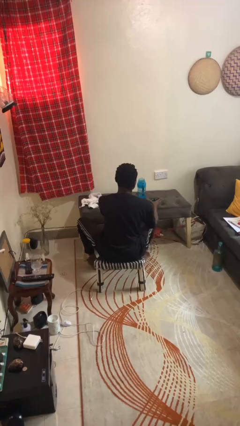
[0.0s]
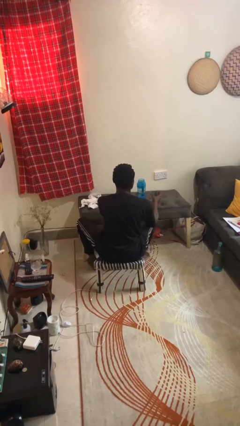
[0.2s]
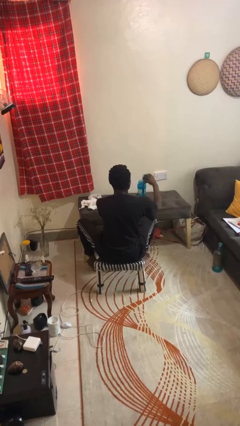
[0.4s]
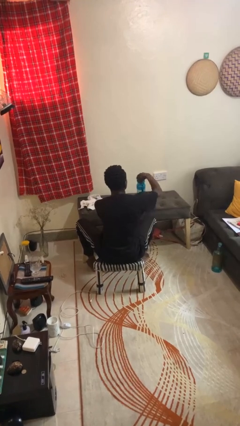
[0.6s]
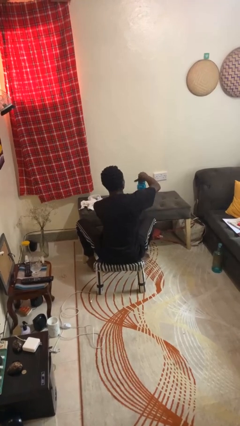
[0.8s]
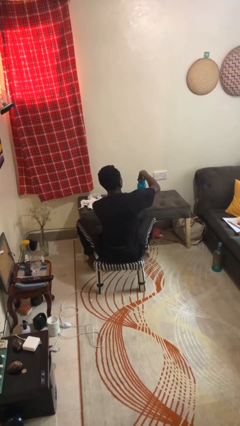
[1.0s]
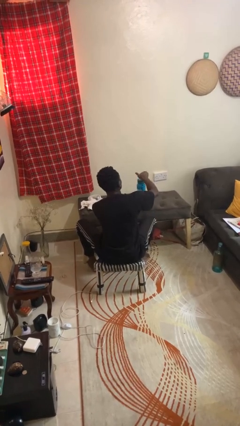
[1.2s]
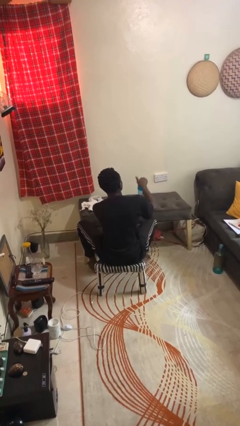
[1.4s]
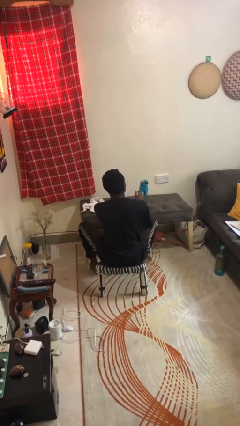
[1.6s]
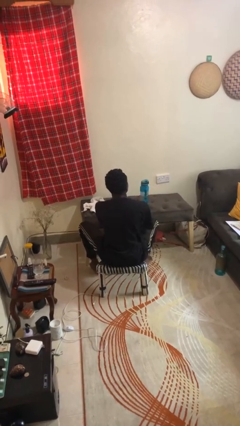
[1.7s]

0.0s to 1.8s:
person closes jar

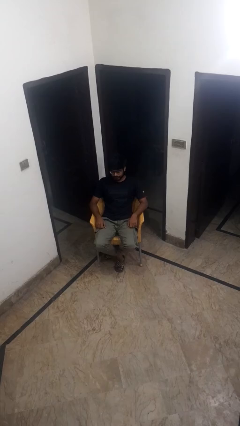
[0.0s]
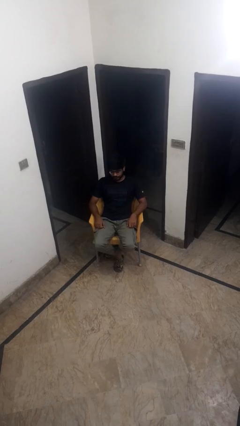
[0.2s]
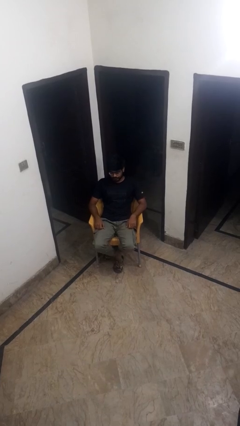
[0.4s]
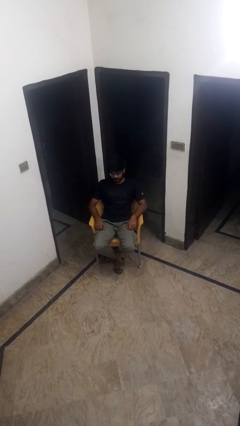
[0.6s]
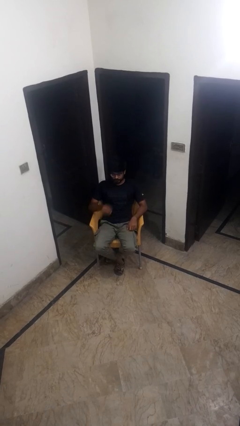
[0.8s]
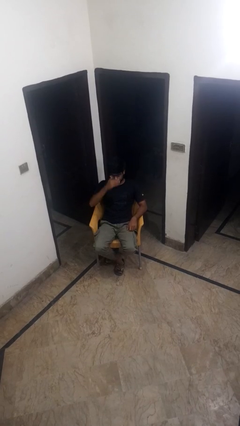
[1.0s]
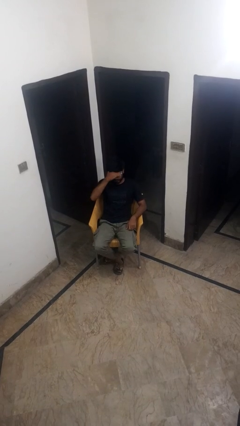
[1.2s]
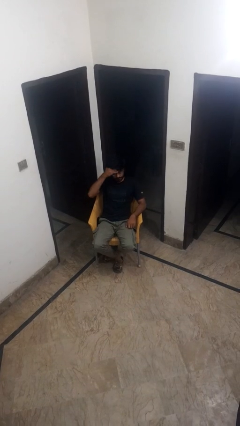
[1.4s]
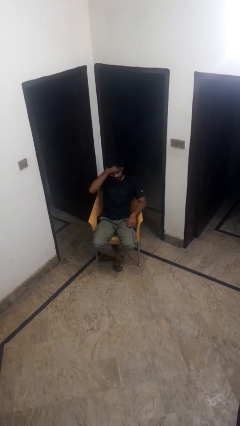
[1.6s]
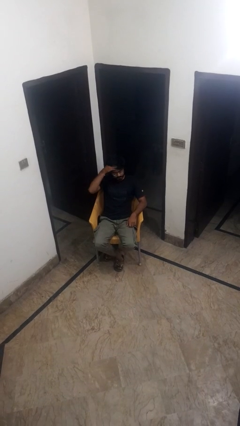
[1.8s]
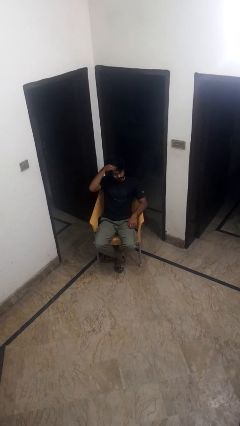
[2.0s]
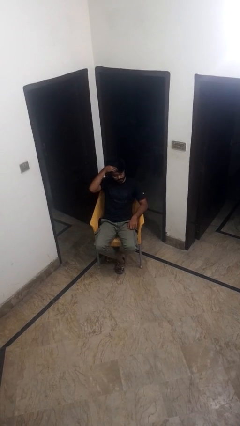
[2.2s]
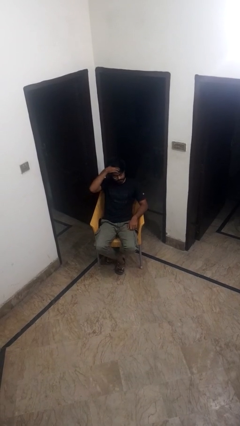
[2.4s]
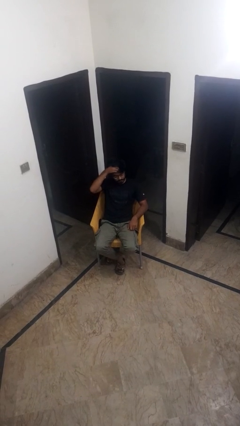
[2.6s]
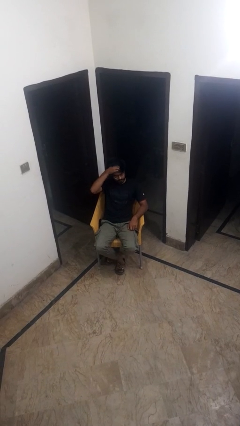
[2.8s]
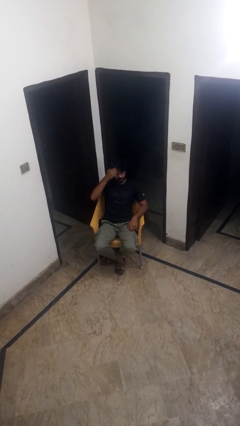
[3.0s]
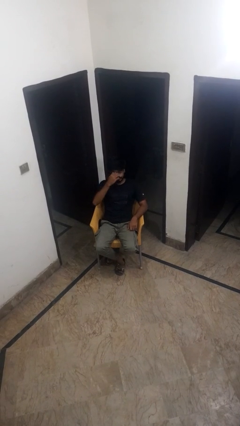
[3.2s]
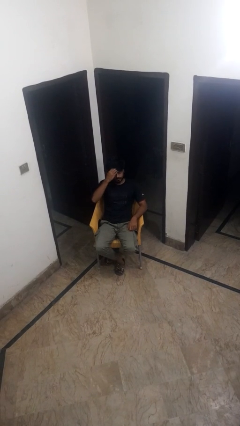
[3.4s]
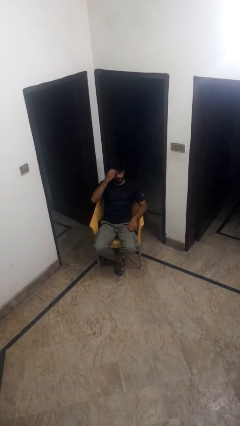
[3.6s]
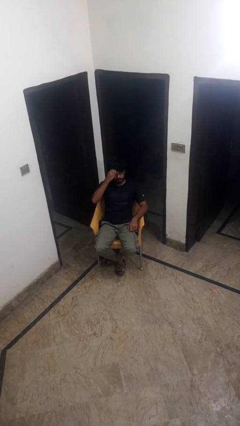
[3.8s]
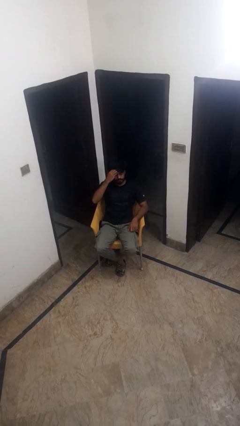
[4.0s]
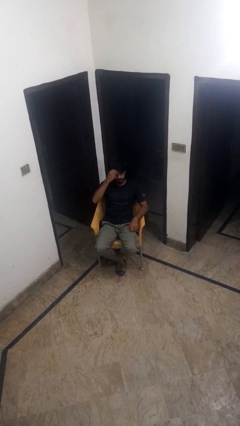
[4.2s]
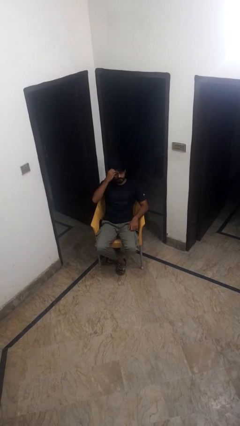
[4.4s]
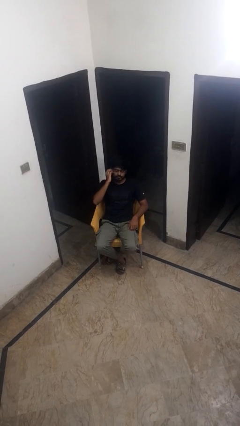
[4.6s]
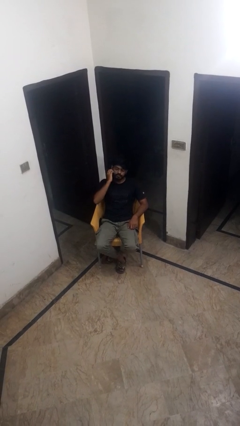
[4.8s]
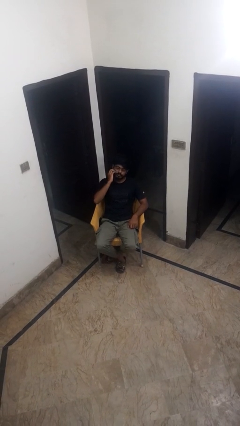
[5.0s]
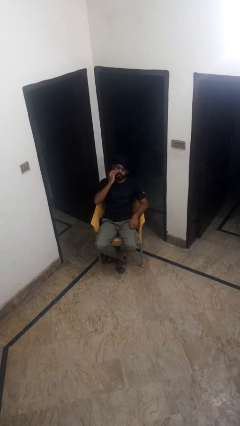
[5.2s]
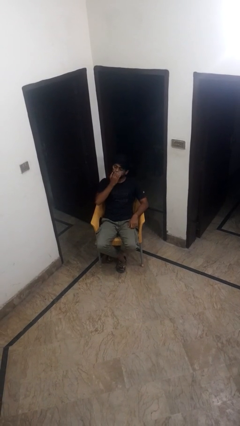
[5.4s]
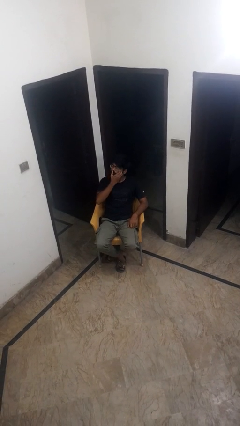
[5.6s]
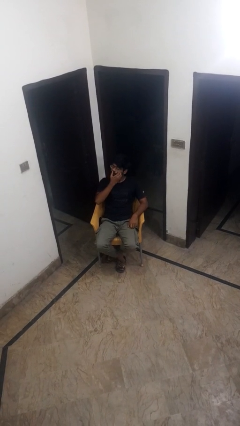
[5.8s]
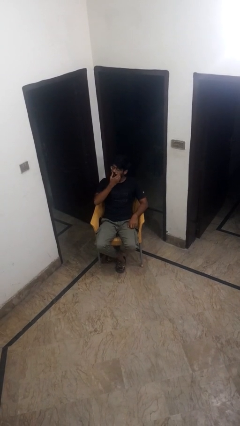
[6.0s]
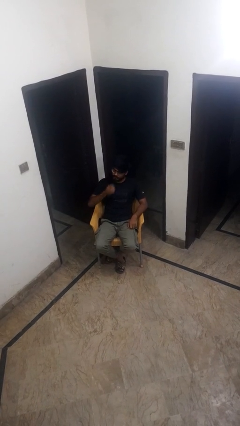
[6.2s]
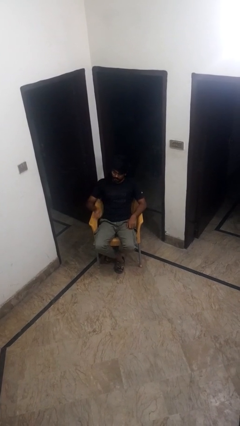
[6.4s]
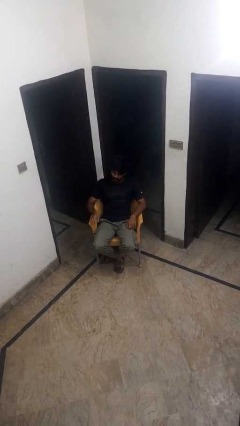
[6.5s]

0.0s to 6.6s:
person scratches face

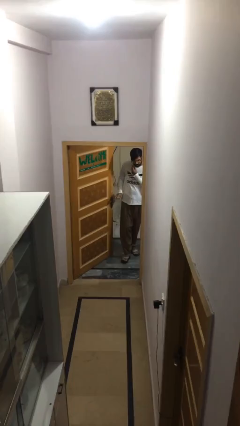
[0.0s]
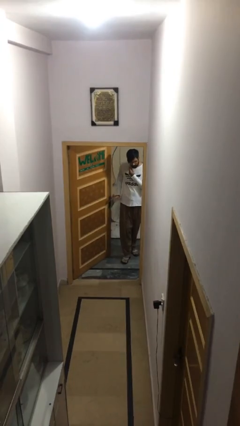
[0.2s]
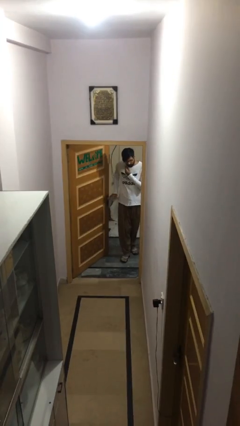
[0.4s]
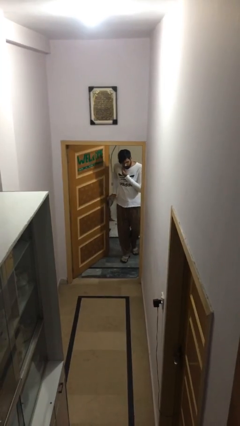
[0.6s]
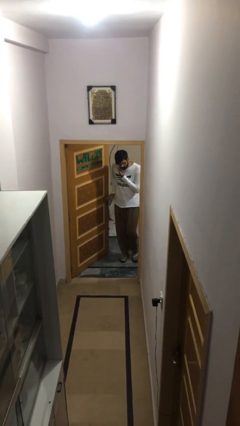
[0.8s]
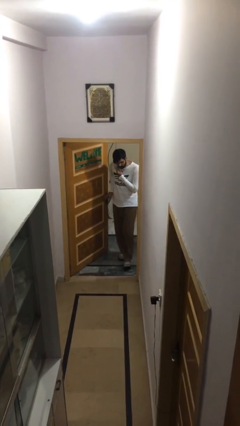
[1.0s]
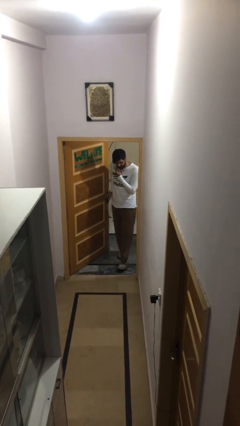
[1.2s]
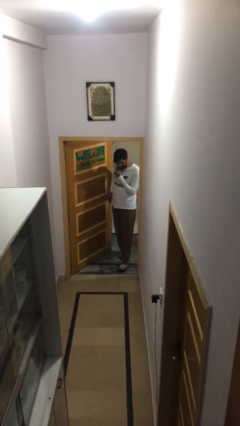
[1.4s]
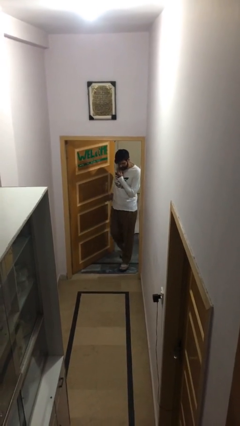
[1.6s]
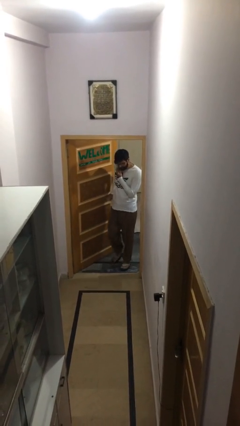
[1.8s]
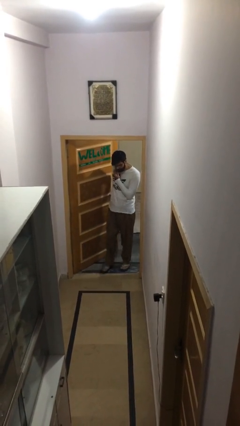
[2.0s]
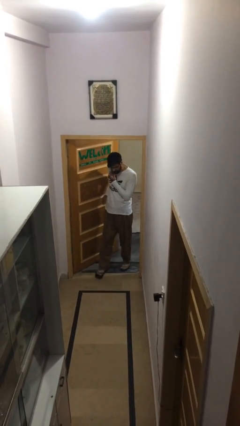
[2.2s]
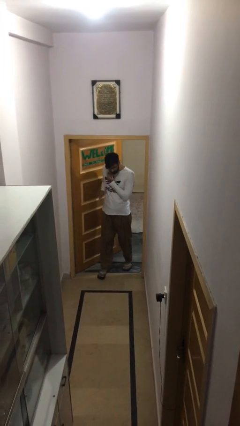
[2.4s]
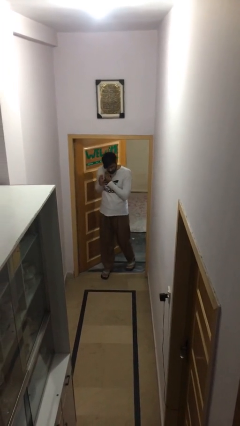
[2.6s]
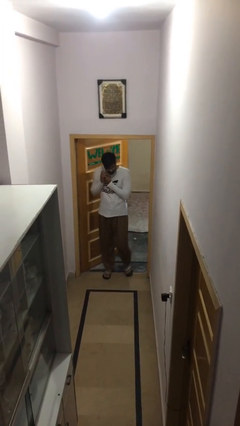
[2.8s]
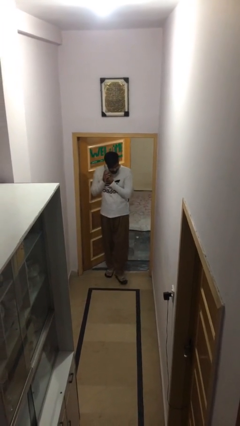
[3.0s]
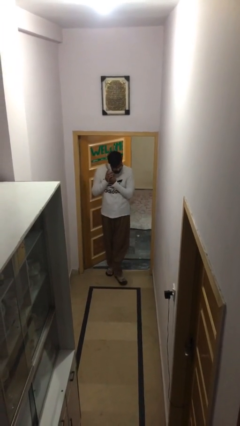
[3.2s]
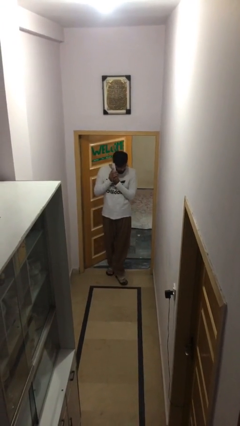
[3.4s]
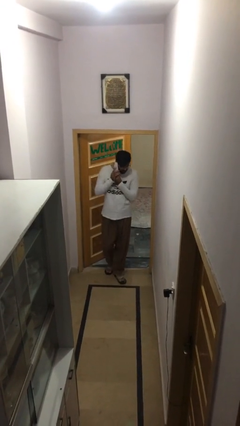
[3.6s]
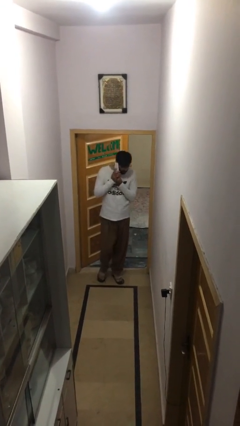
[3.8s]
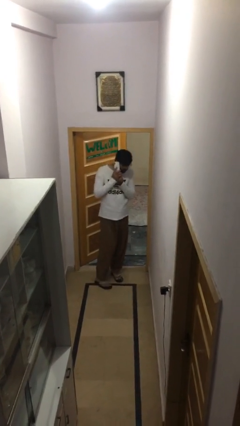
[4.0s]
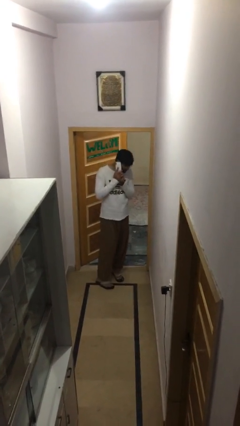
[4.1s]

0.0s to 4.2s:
person enters scene through structure

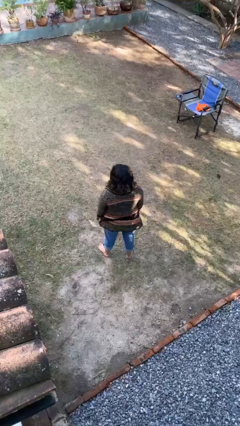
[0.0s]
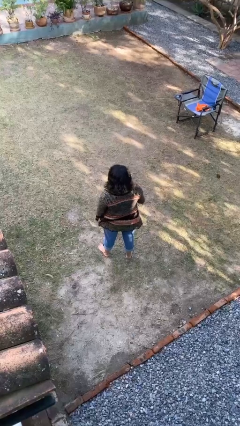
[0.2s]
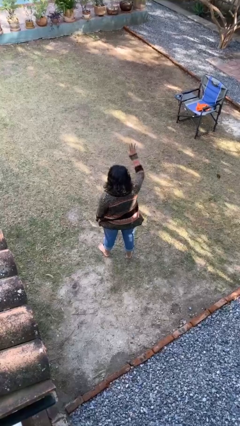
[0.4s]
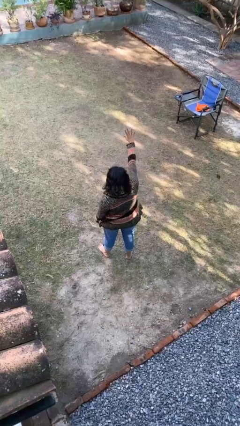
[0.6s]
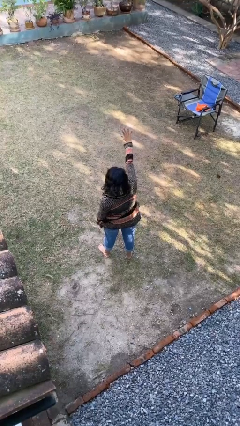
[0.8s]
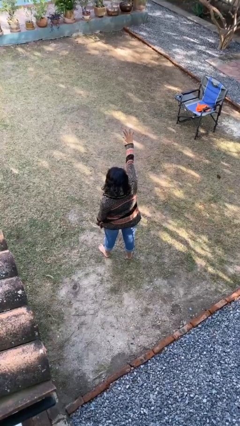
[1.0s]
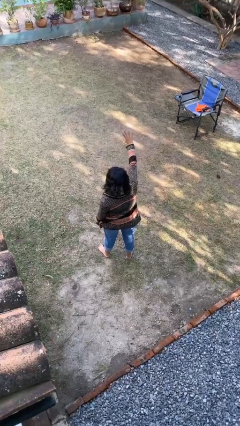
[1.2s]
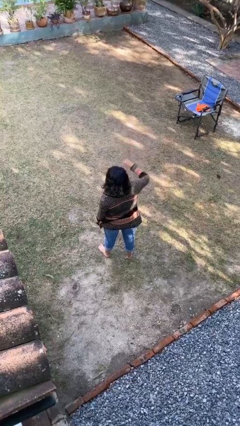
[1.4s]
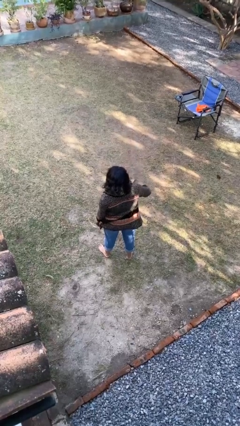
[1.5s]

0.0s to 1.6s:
person gestures number five

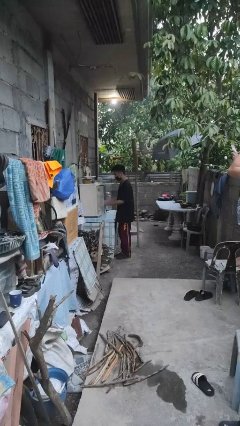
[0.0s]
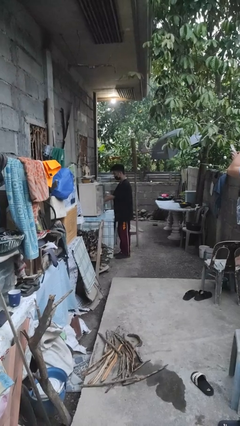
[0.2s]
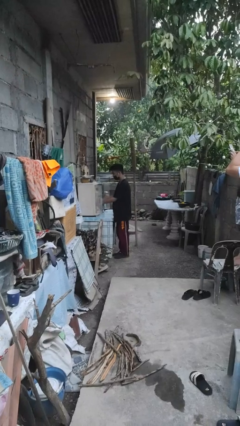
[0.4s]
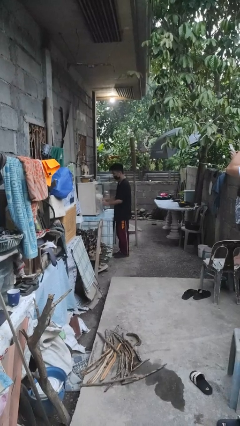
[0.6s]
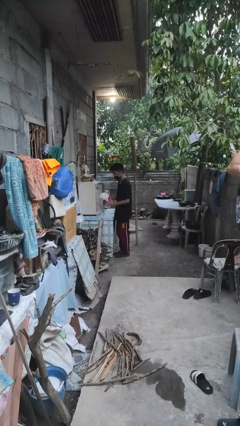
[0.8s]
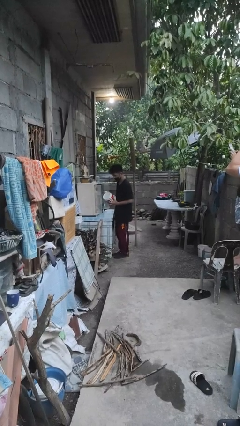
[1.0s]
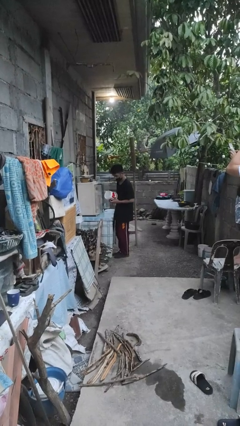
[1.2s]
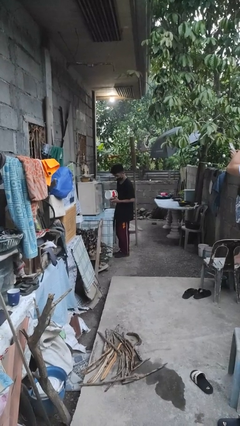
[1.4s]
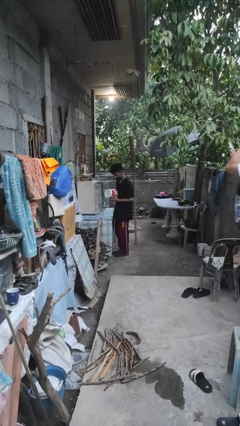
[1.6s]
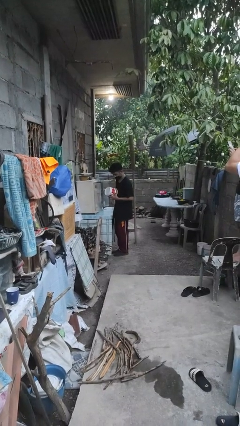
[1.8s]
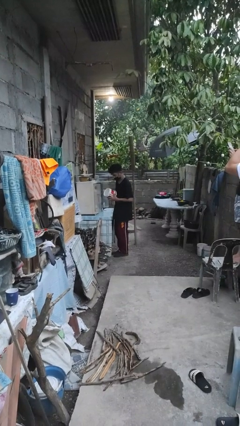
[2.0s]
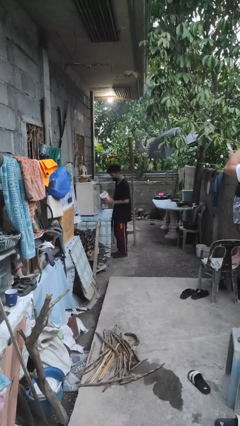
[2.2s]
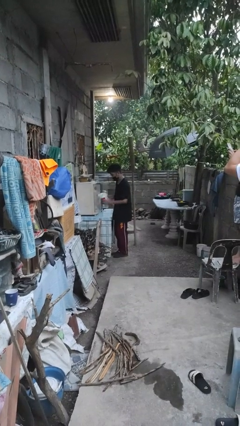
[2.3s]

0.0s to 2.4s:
person picks up object from cabinet

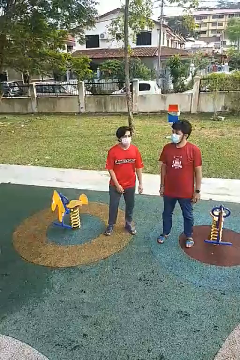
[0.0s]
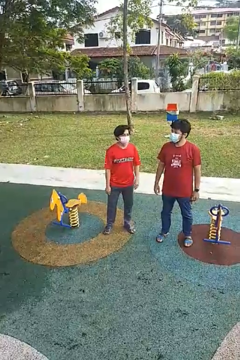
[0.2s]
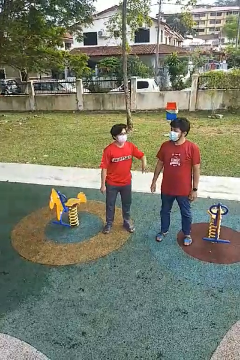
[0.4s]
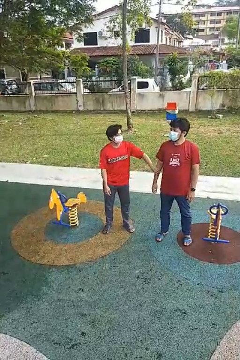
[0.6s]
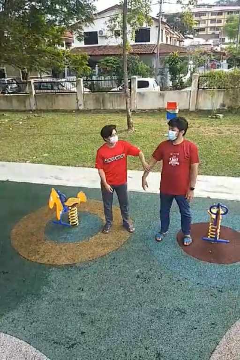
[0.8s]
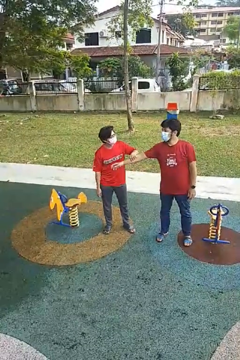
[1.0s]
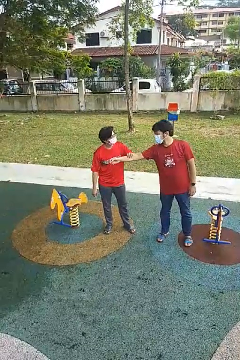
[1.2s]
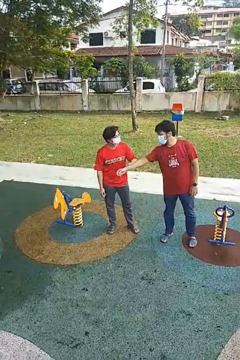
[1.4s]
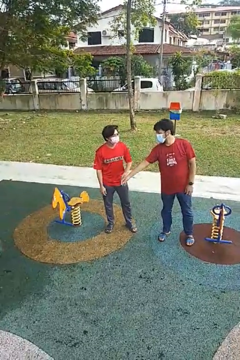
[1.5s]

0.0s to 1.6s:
person grabs person by forearm
